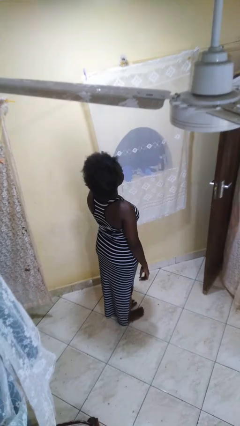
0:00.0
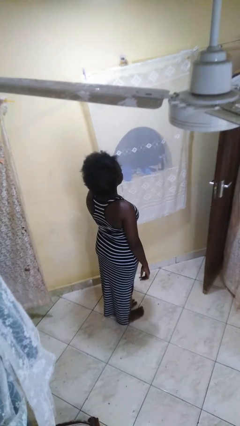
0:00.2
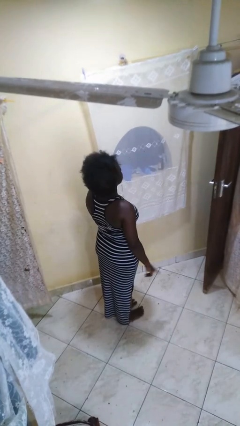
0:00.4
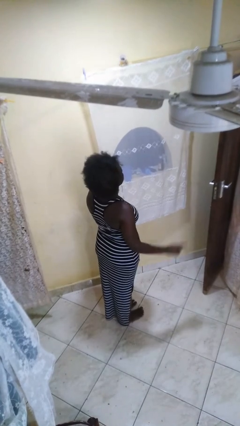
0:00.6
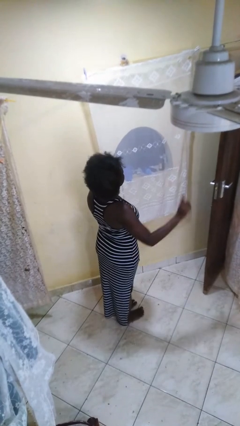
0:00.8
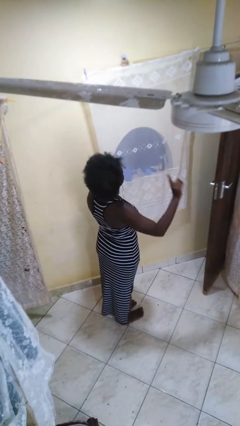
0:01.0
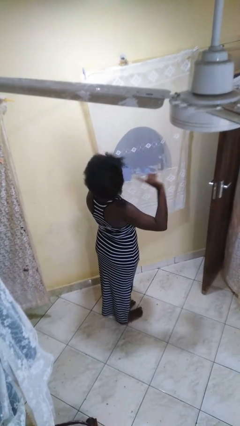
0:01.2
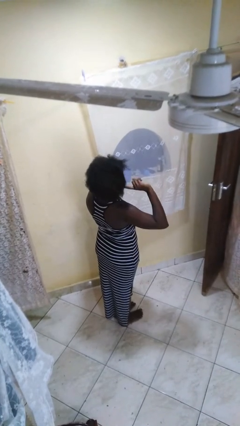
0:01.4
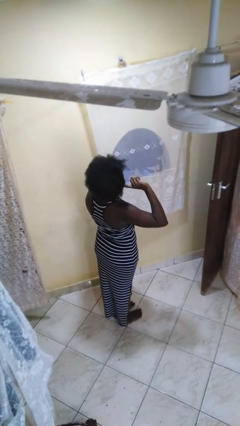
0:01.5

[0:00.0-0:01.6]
person gestures listen closely

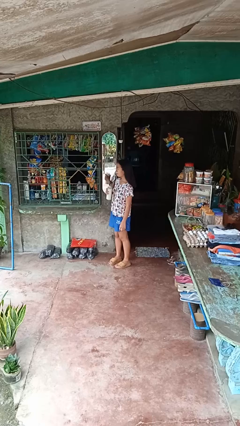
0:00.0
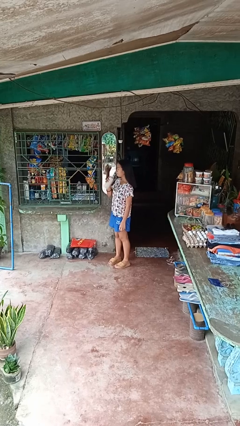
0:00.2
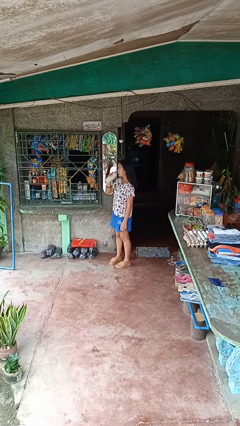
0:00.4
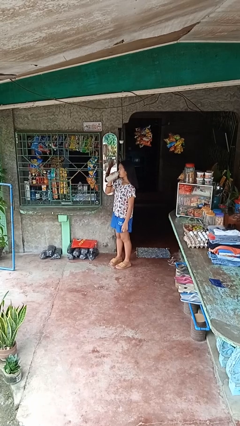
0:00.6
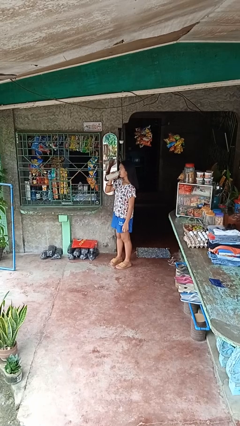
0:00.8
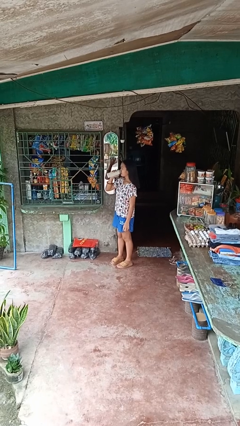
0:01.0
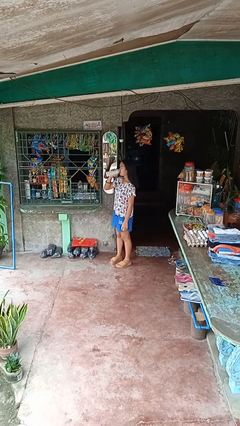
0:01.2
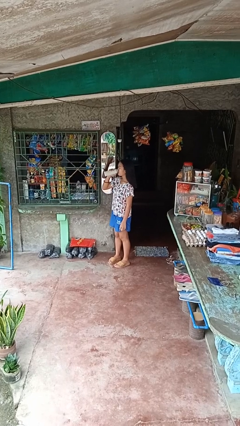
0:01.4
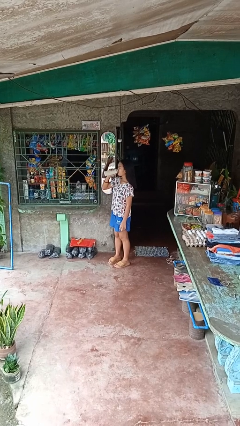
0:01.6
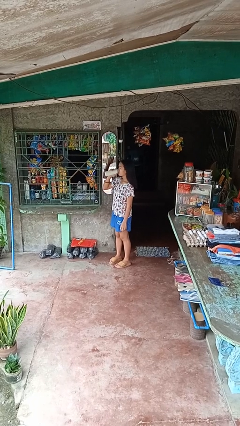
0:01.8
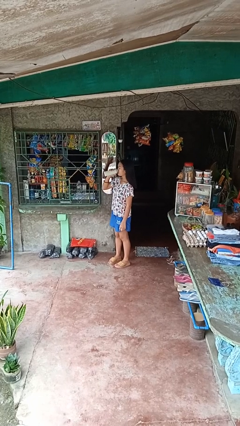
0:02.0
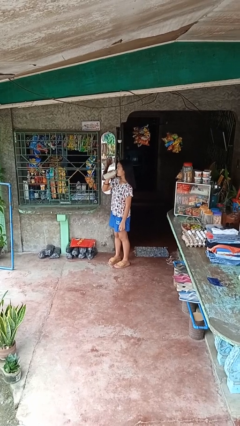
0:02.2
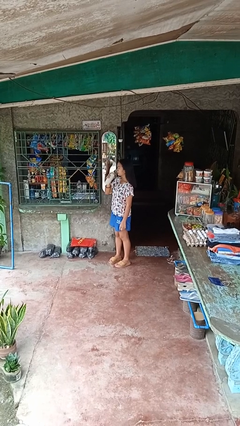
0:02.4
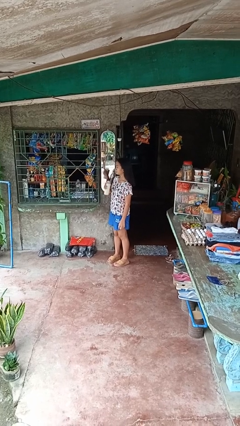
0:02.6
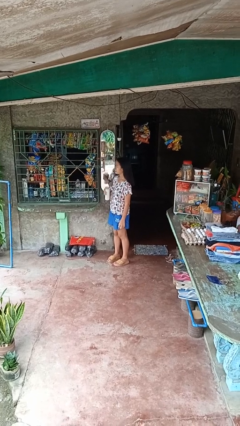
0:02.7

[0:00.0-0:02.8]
person drinks from bottle

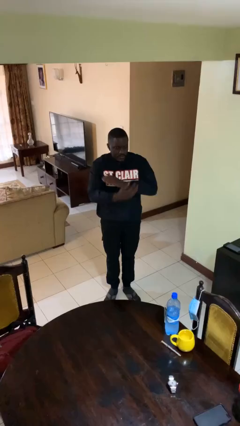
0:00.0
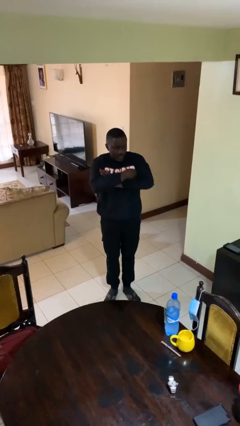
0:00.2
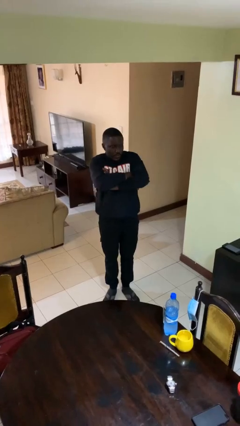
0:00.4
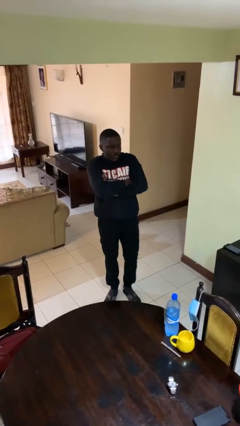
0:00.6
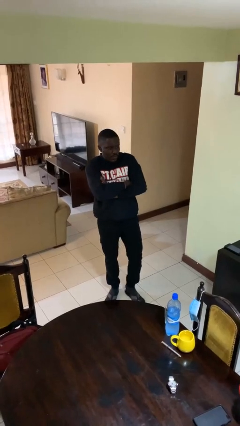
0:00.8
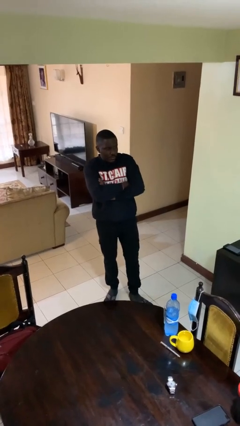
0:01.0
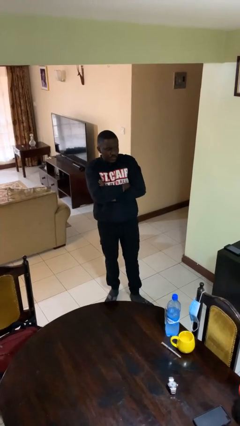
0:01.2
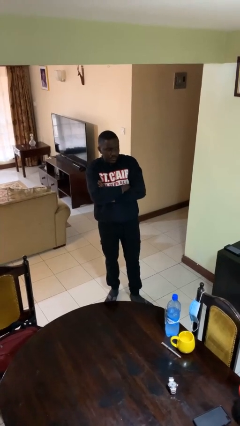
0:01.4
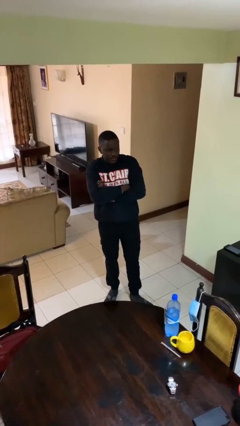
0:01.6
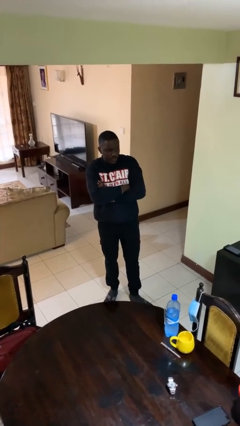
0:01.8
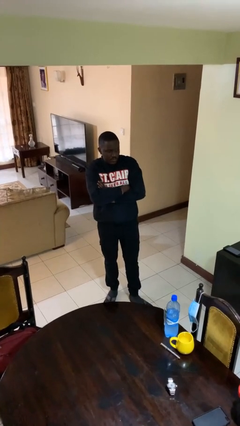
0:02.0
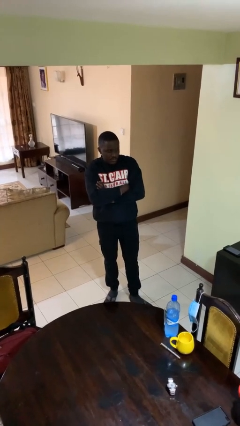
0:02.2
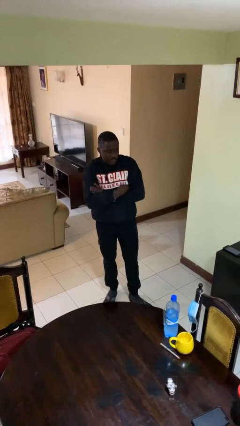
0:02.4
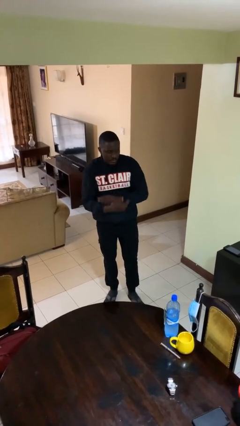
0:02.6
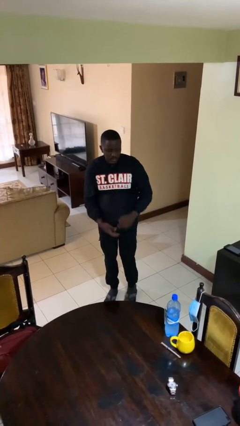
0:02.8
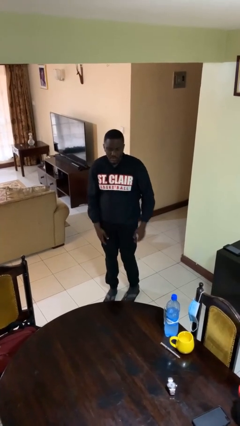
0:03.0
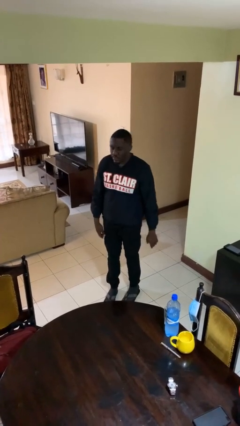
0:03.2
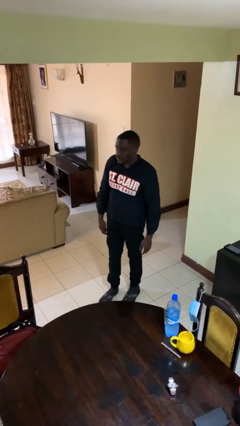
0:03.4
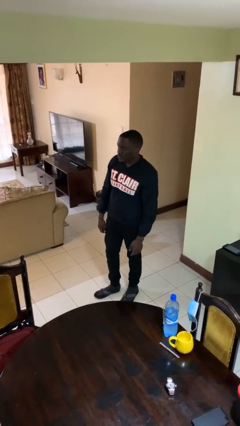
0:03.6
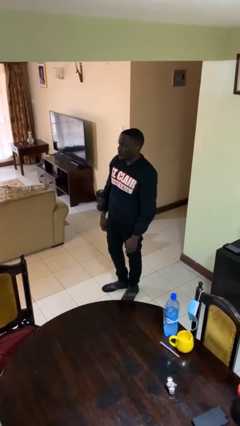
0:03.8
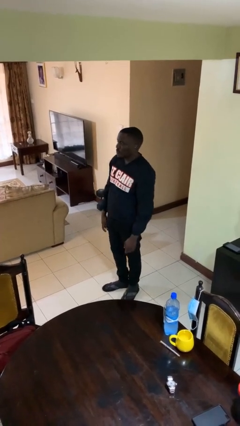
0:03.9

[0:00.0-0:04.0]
person crosses arms

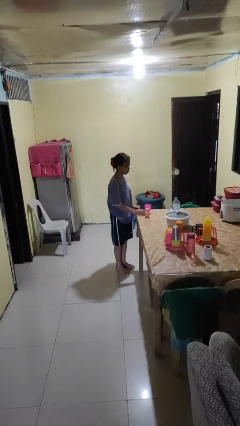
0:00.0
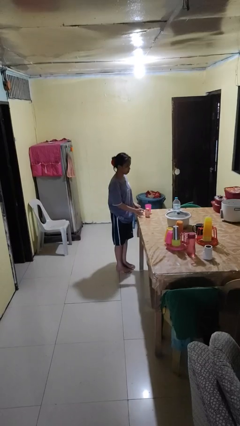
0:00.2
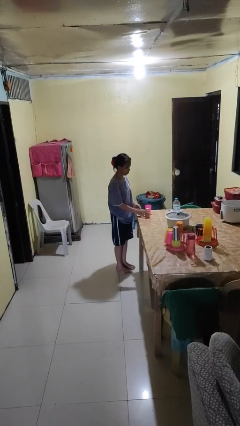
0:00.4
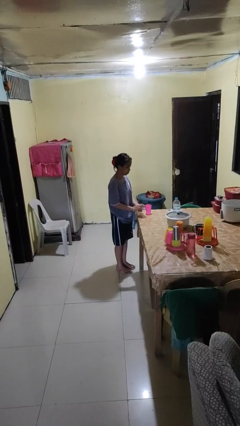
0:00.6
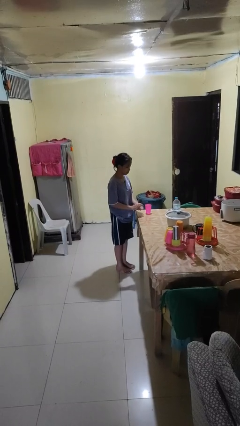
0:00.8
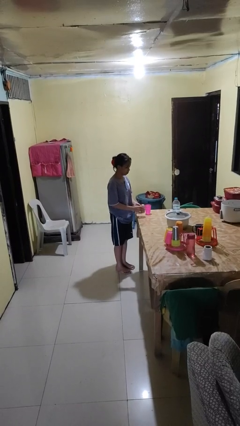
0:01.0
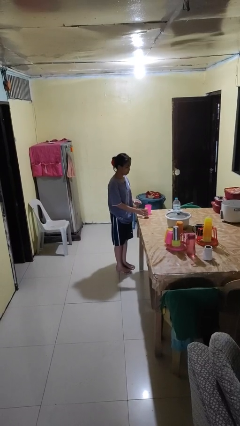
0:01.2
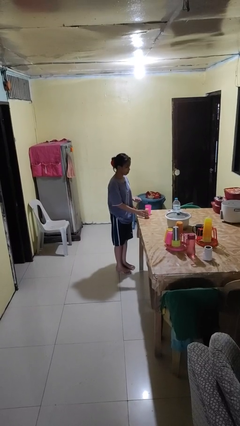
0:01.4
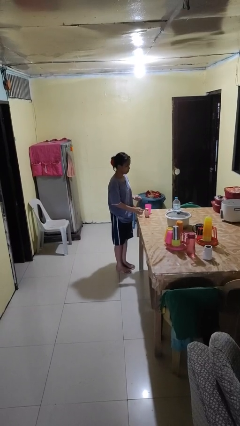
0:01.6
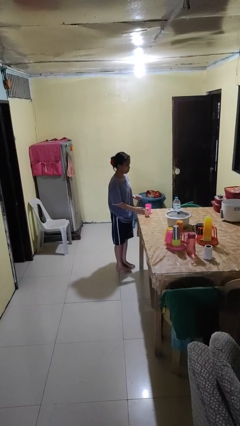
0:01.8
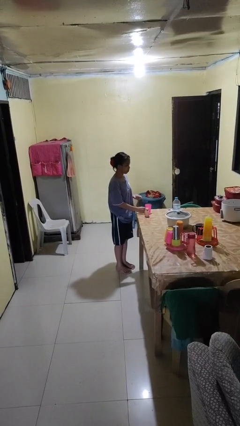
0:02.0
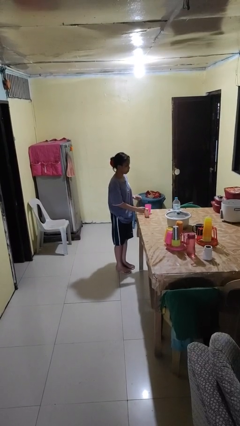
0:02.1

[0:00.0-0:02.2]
person takes medicine pills

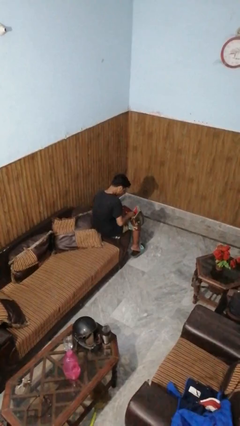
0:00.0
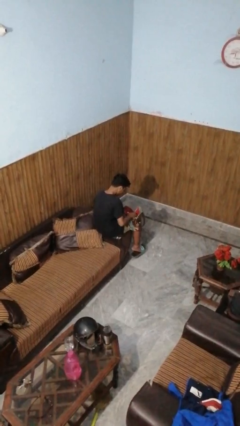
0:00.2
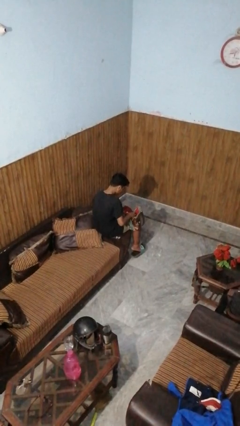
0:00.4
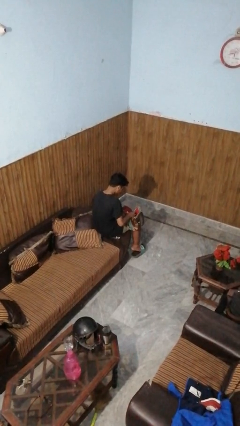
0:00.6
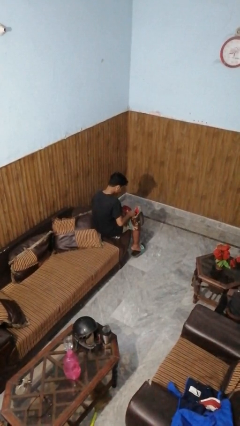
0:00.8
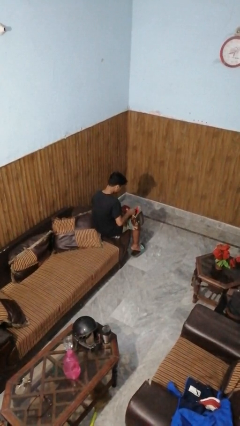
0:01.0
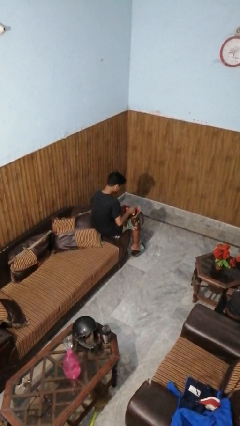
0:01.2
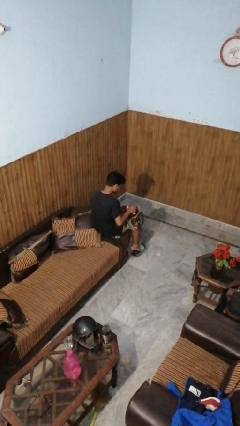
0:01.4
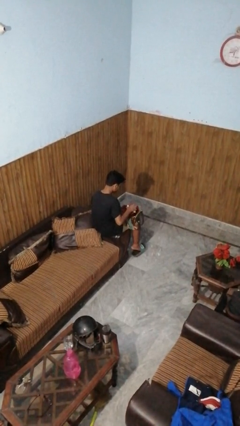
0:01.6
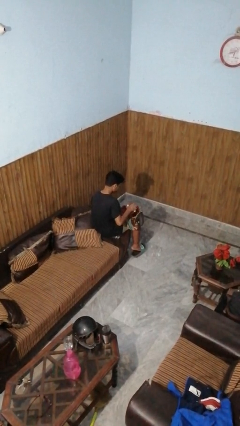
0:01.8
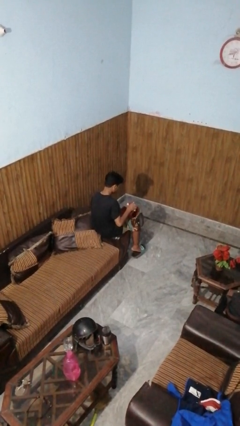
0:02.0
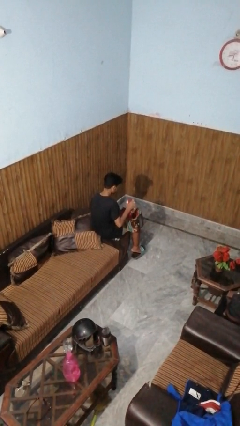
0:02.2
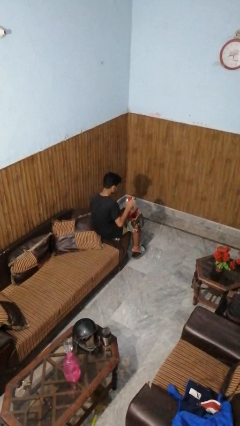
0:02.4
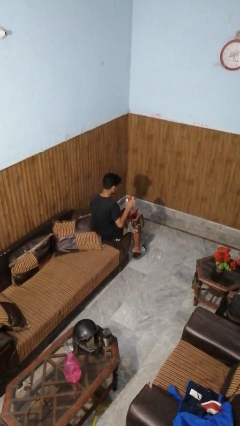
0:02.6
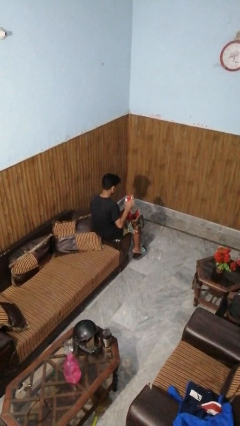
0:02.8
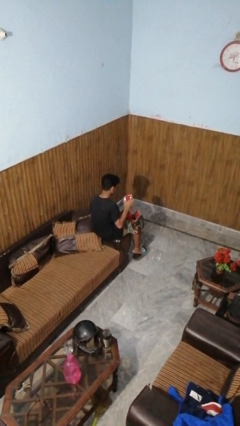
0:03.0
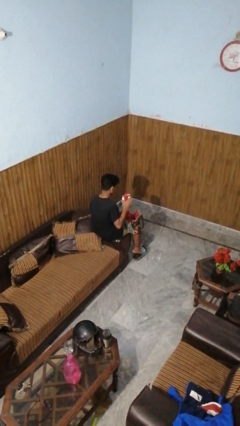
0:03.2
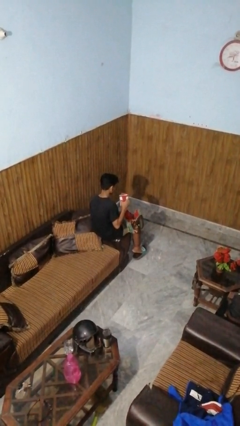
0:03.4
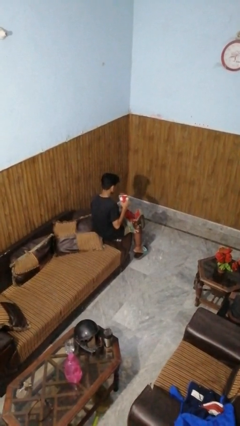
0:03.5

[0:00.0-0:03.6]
person takes object from purse

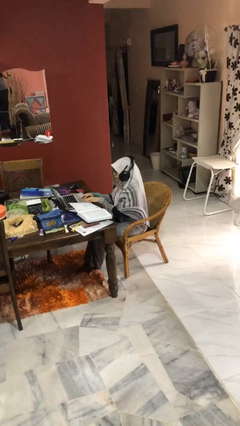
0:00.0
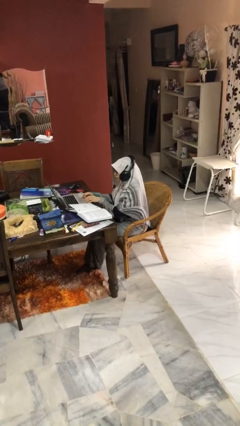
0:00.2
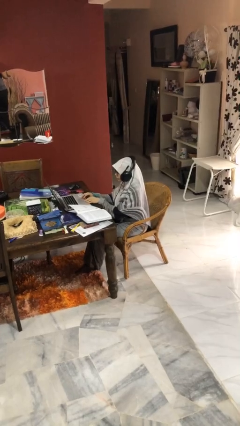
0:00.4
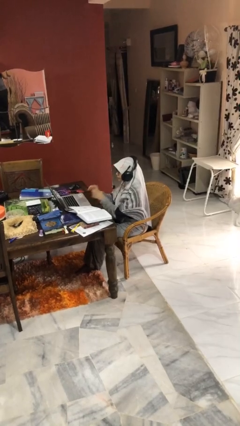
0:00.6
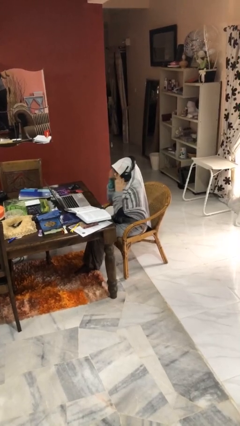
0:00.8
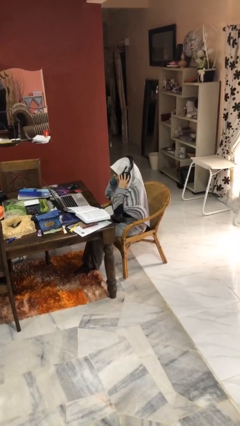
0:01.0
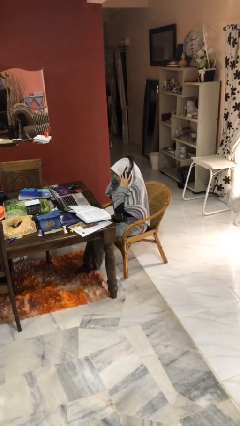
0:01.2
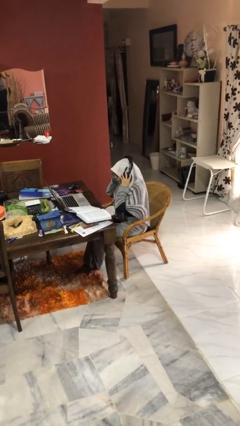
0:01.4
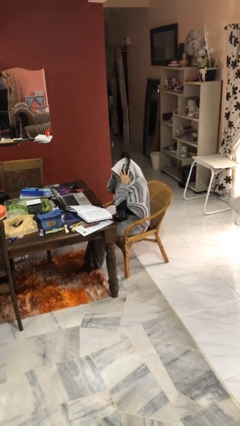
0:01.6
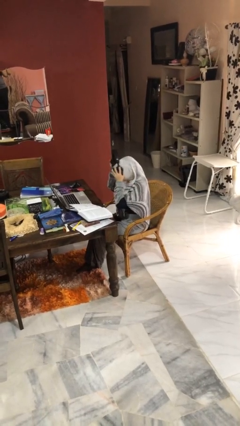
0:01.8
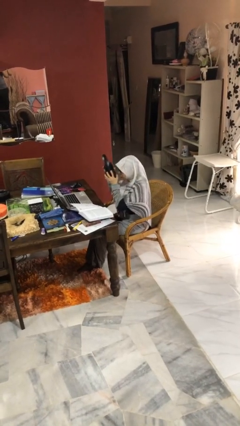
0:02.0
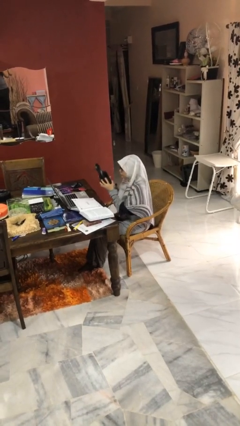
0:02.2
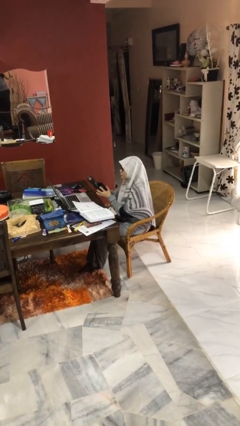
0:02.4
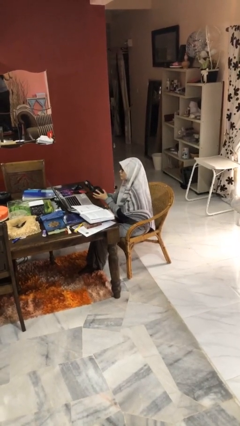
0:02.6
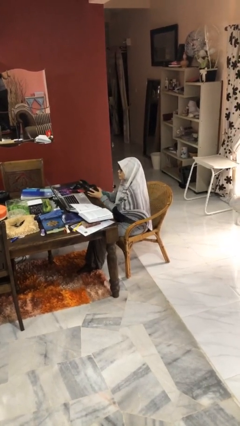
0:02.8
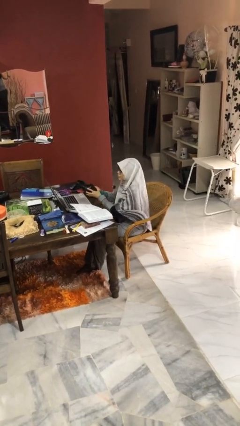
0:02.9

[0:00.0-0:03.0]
person takes off headphones

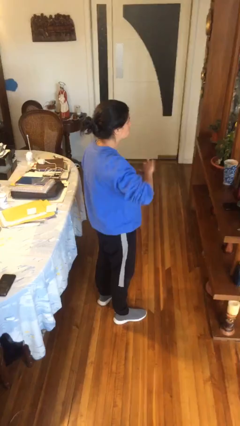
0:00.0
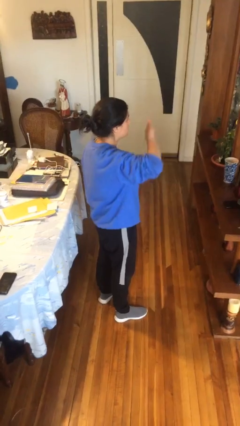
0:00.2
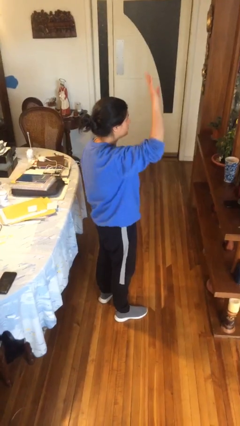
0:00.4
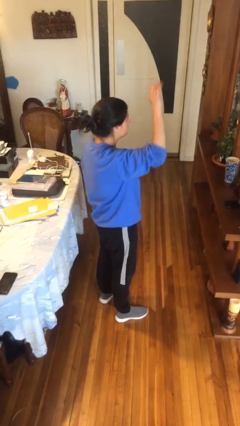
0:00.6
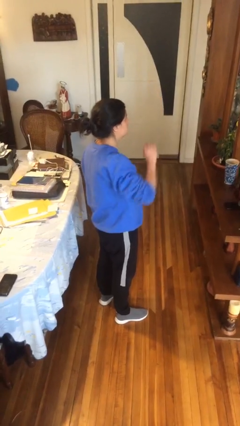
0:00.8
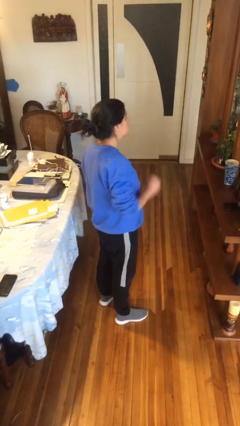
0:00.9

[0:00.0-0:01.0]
person gestures swipe up
